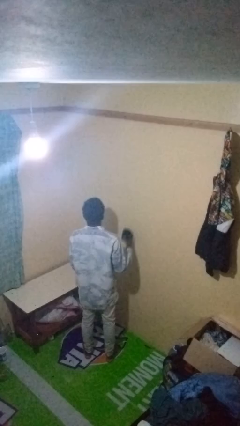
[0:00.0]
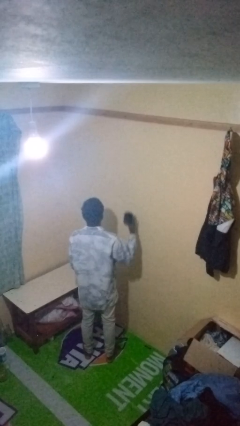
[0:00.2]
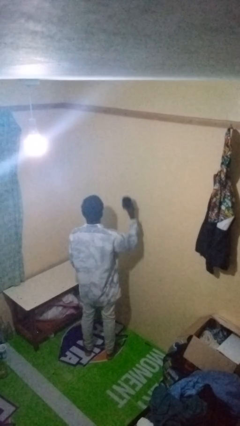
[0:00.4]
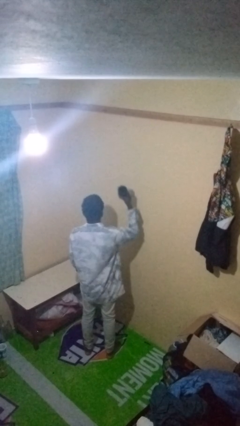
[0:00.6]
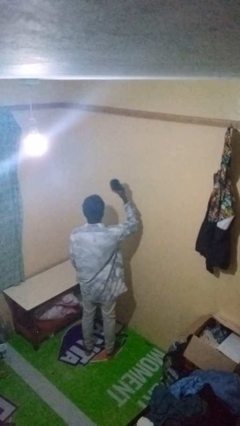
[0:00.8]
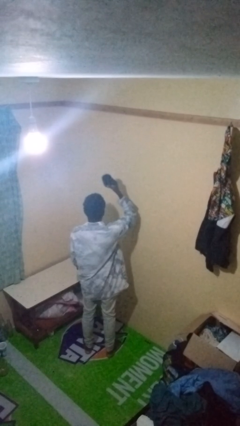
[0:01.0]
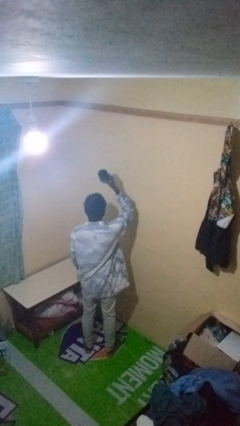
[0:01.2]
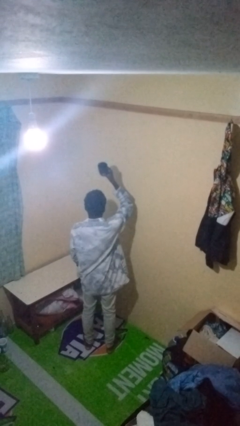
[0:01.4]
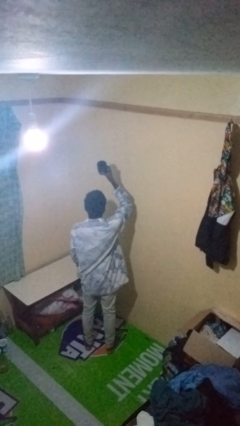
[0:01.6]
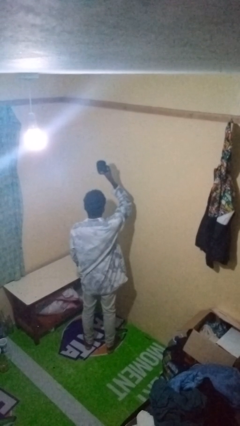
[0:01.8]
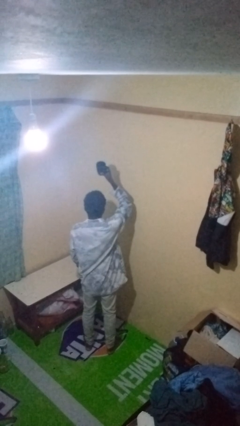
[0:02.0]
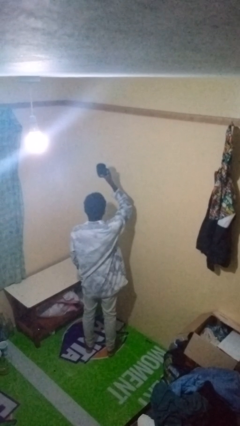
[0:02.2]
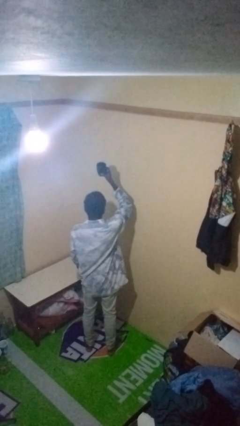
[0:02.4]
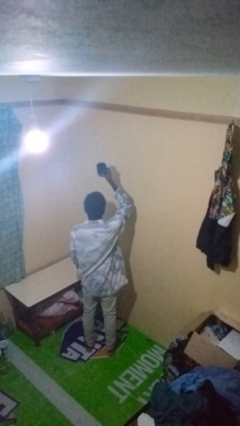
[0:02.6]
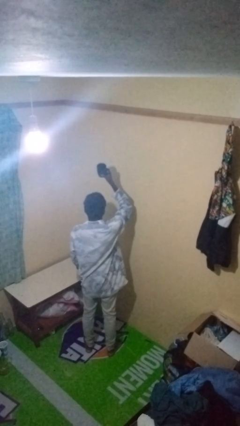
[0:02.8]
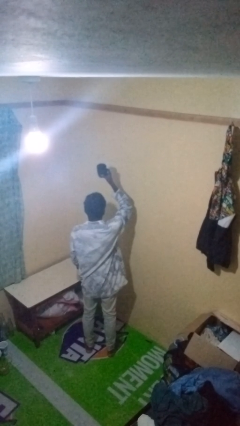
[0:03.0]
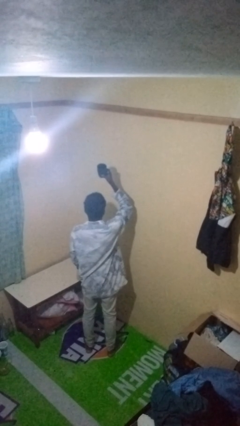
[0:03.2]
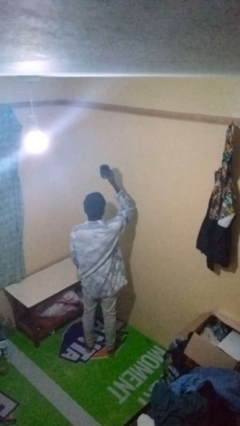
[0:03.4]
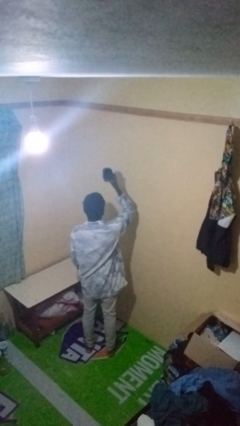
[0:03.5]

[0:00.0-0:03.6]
person holds object above head

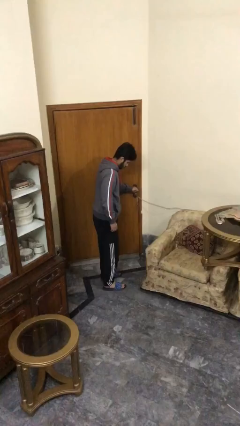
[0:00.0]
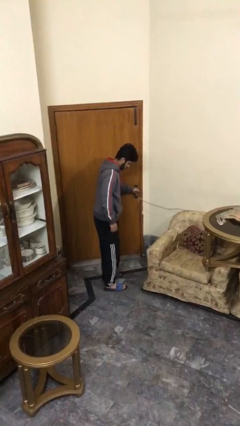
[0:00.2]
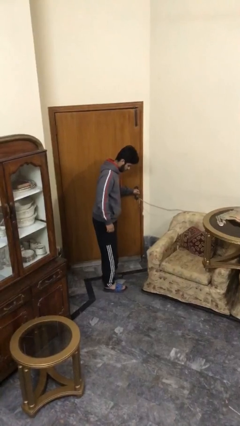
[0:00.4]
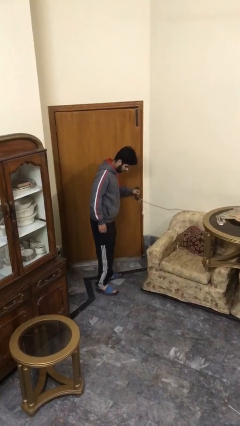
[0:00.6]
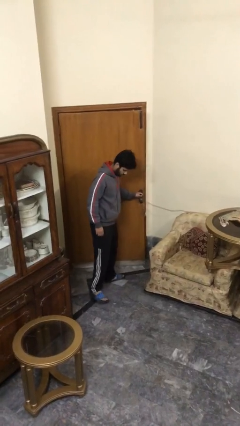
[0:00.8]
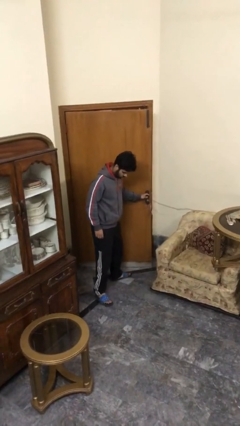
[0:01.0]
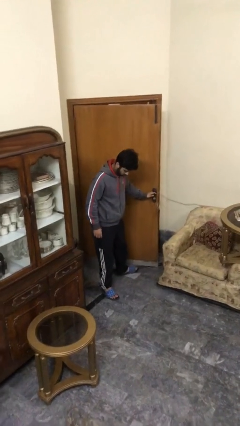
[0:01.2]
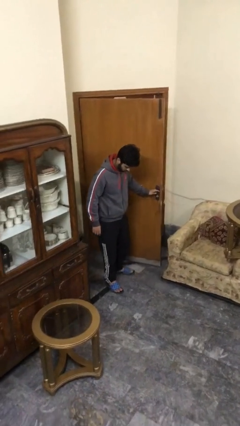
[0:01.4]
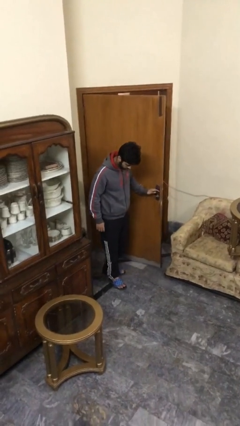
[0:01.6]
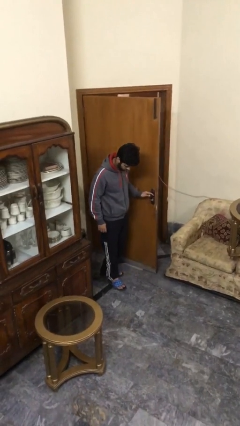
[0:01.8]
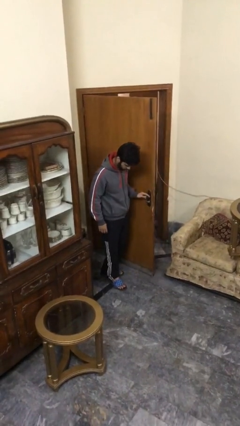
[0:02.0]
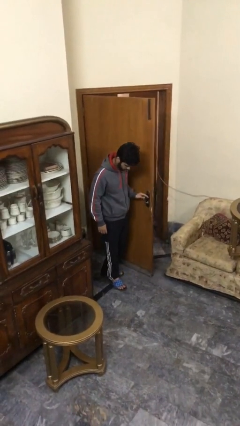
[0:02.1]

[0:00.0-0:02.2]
person opens facility door

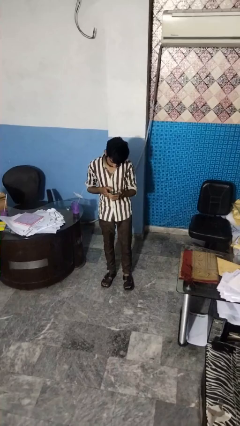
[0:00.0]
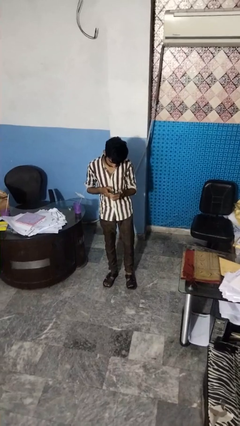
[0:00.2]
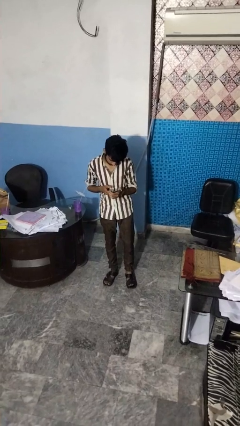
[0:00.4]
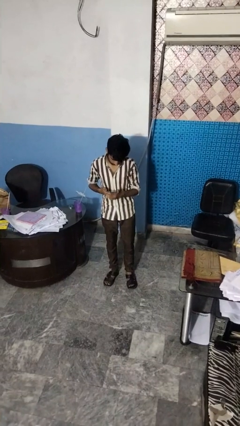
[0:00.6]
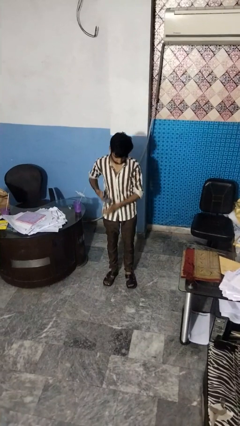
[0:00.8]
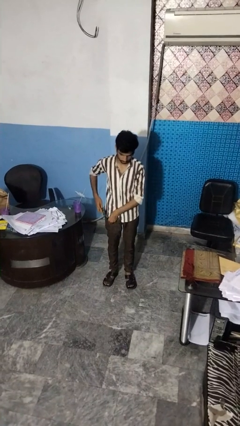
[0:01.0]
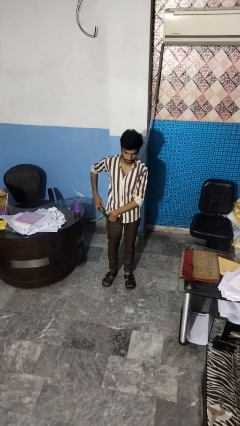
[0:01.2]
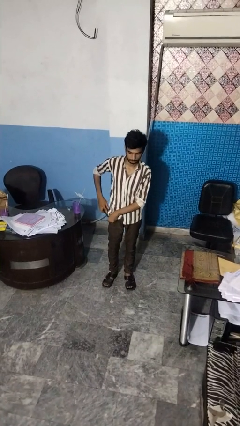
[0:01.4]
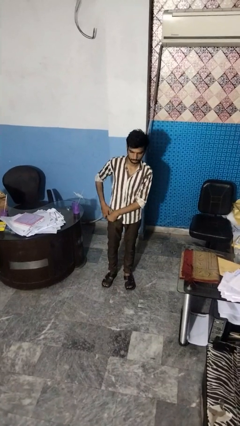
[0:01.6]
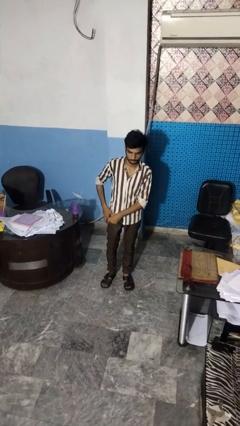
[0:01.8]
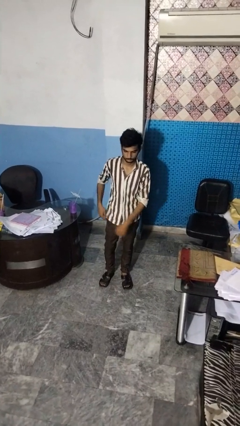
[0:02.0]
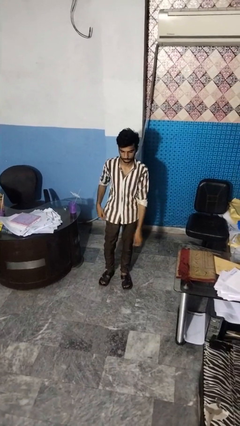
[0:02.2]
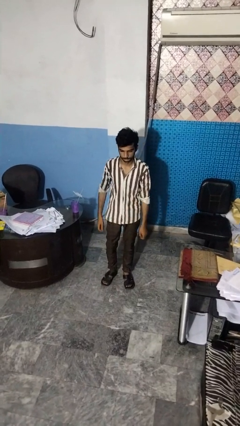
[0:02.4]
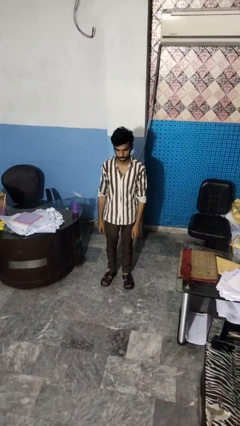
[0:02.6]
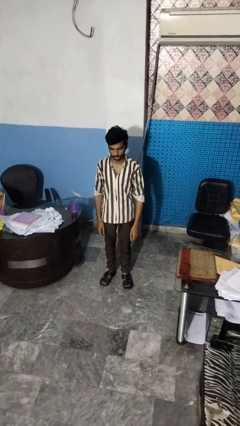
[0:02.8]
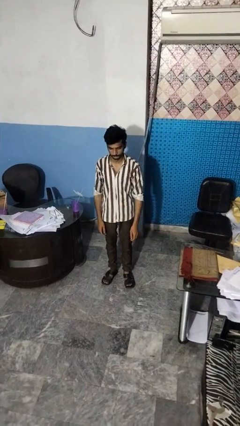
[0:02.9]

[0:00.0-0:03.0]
person puts phone into pocket

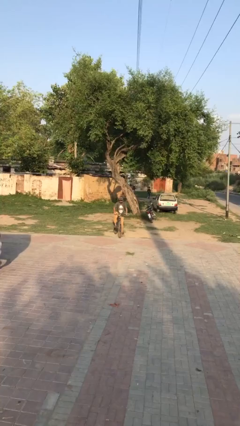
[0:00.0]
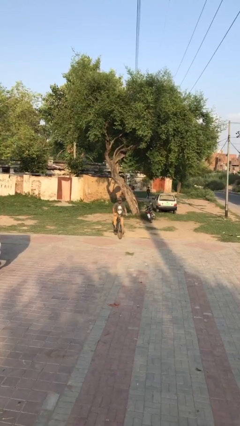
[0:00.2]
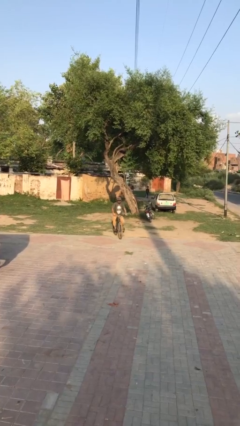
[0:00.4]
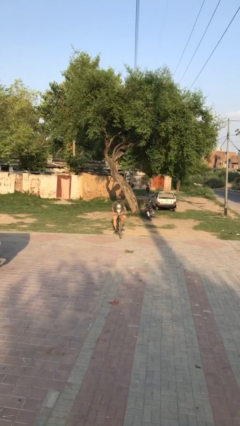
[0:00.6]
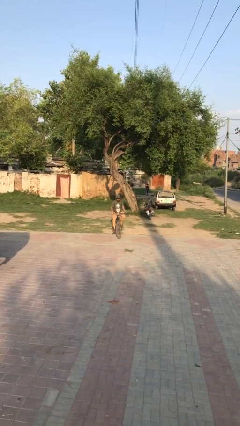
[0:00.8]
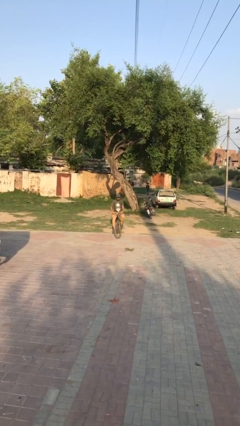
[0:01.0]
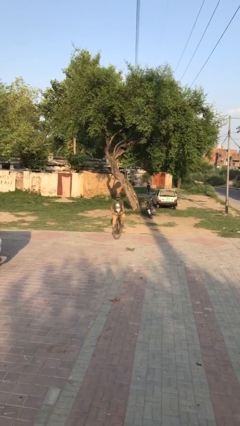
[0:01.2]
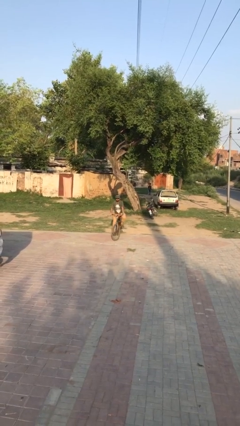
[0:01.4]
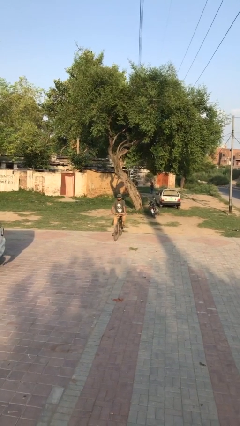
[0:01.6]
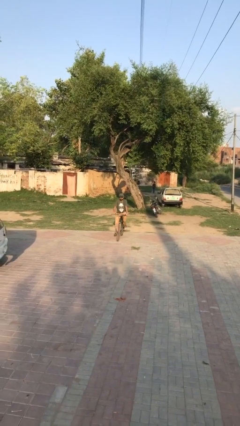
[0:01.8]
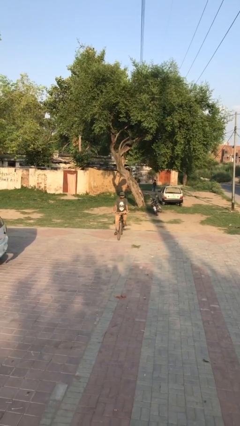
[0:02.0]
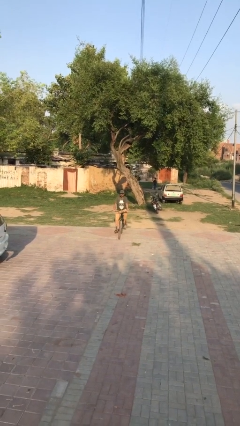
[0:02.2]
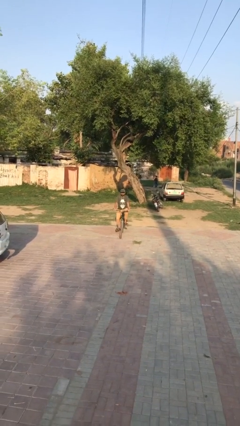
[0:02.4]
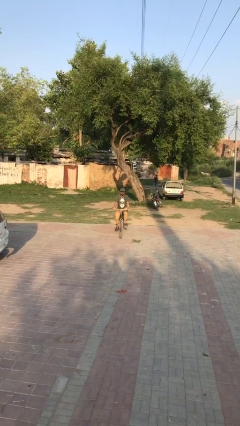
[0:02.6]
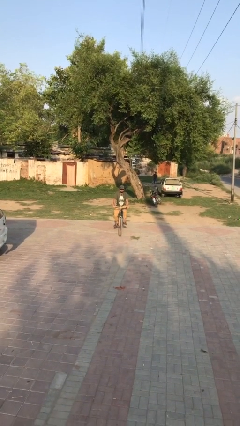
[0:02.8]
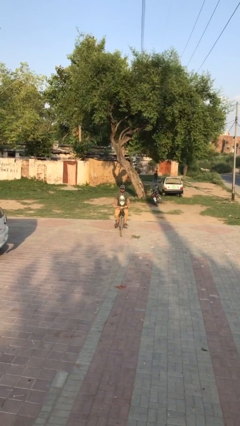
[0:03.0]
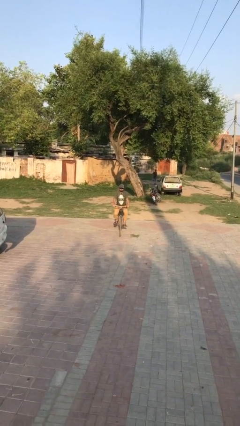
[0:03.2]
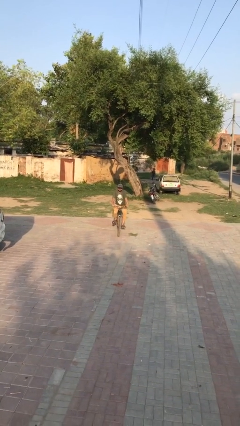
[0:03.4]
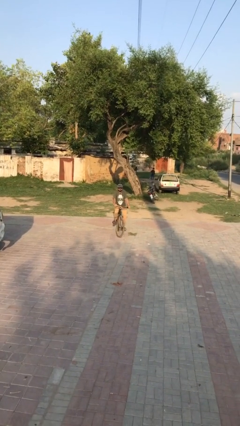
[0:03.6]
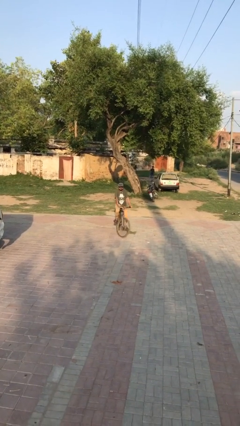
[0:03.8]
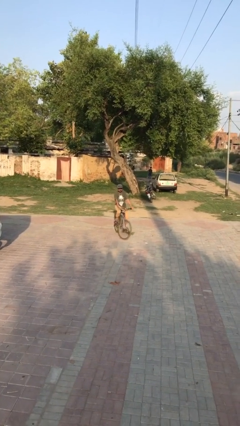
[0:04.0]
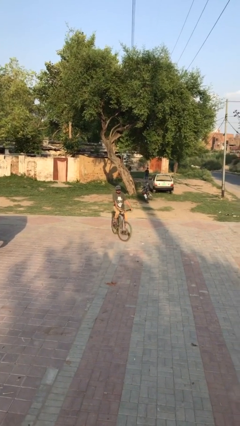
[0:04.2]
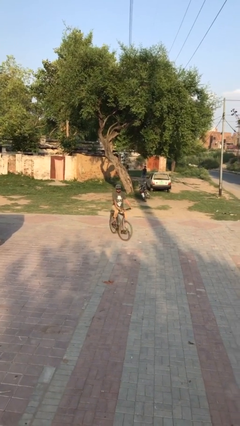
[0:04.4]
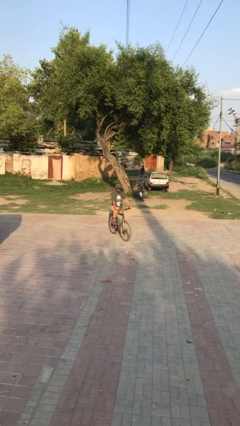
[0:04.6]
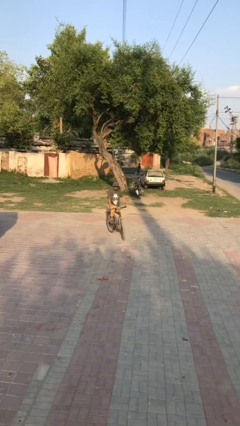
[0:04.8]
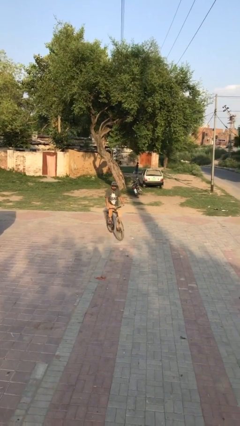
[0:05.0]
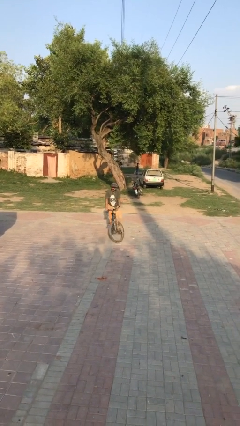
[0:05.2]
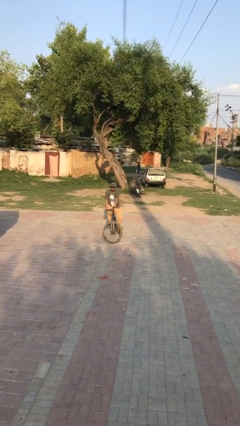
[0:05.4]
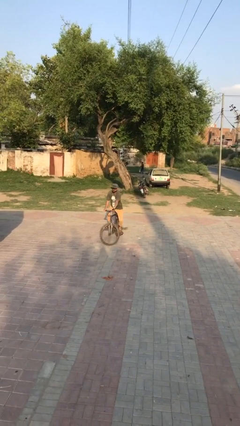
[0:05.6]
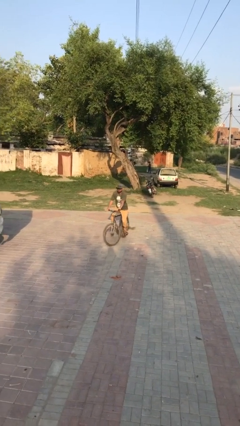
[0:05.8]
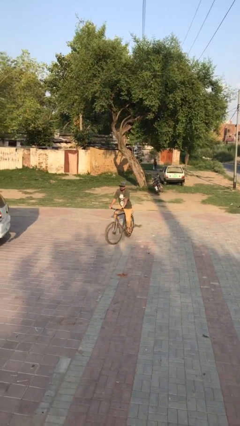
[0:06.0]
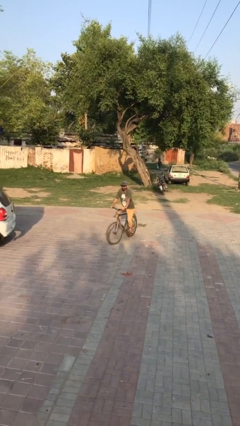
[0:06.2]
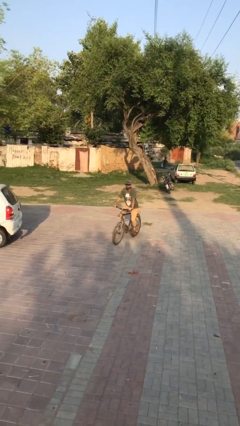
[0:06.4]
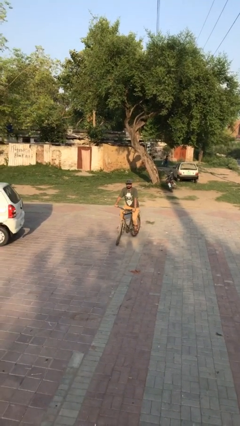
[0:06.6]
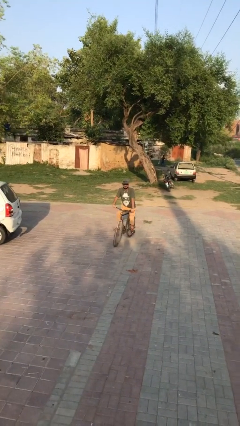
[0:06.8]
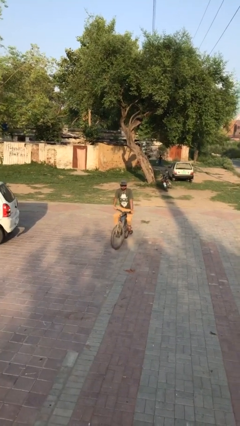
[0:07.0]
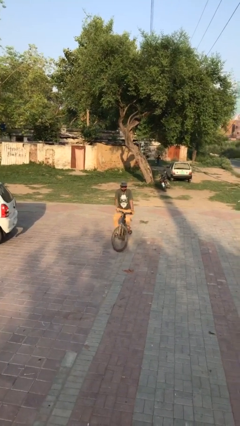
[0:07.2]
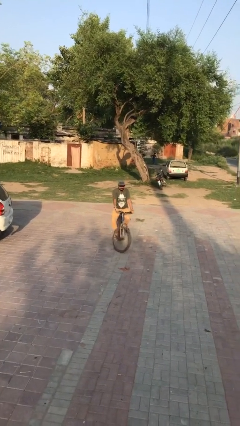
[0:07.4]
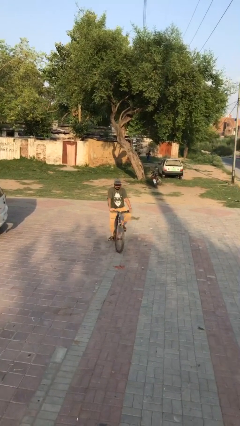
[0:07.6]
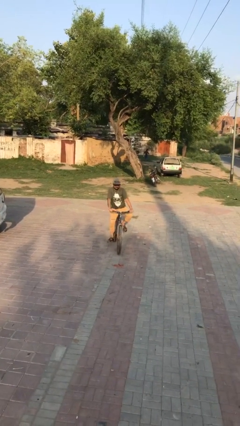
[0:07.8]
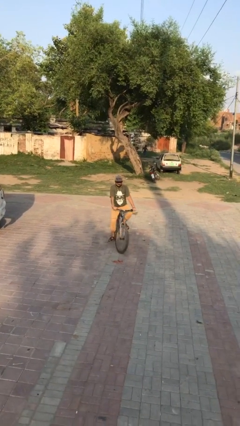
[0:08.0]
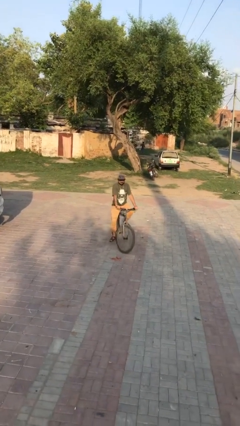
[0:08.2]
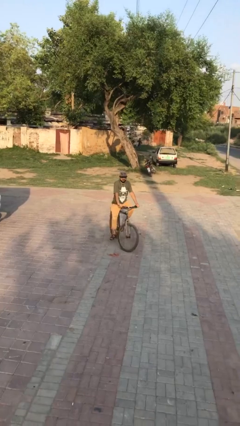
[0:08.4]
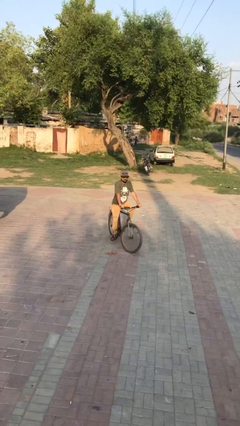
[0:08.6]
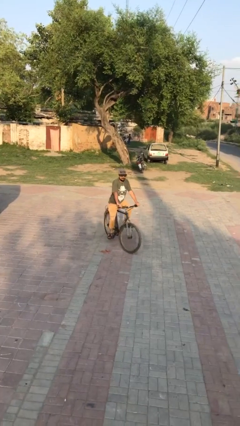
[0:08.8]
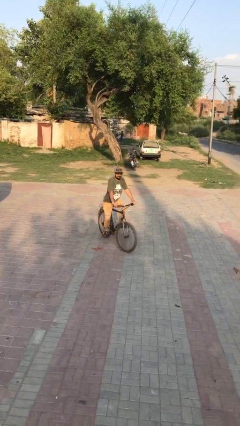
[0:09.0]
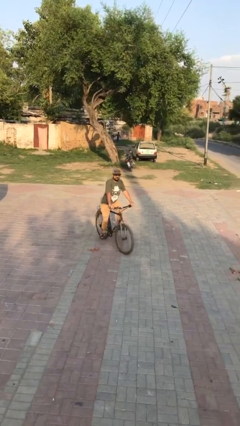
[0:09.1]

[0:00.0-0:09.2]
person rides bicycle
